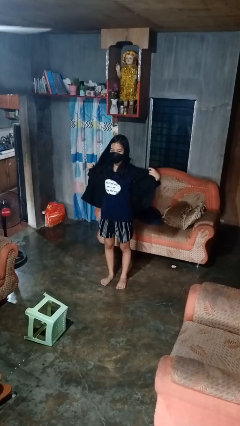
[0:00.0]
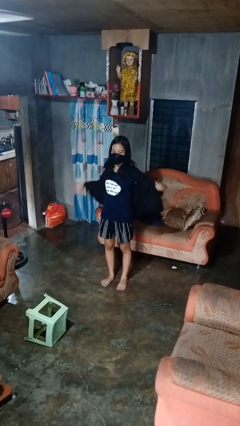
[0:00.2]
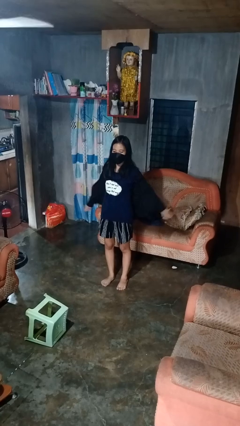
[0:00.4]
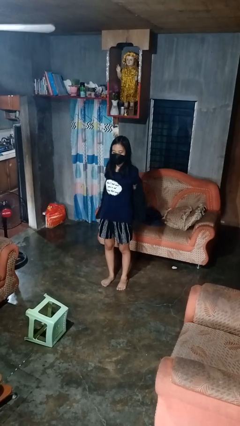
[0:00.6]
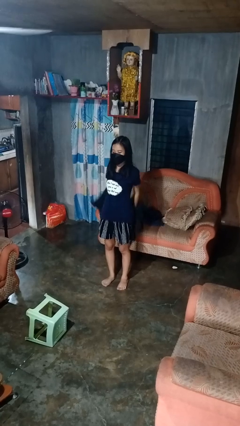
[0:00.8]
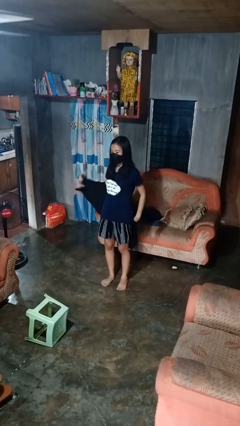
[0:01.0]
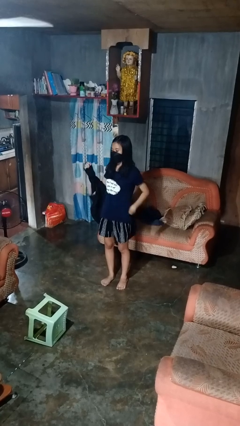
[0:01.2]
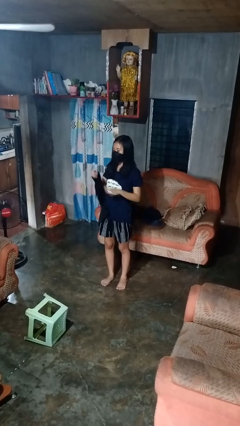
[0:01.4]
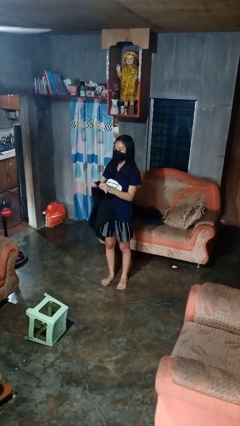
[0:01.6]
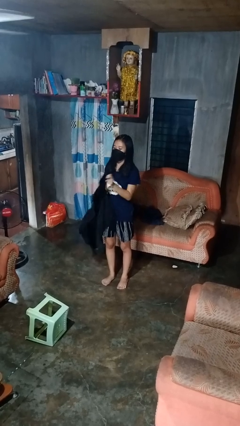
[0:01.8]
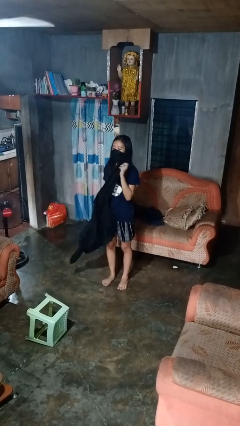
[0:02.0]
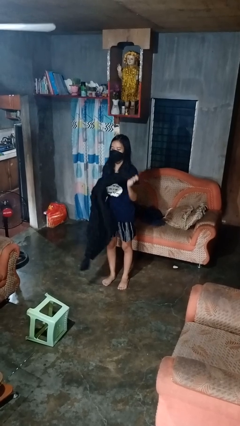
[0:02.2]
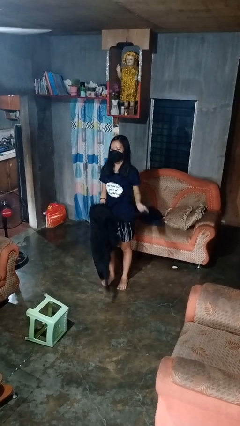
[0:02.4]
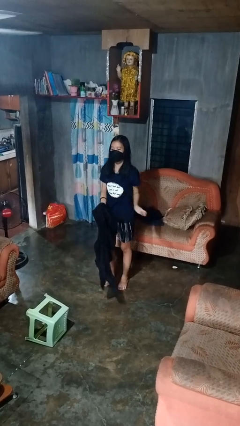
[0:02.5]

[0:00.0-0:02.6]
person takes off shirt

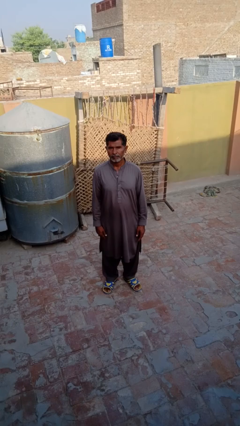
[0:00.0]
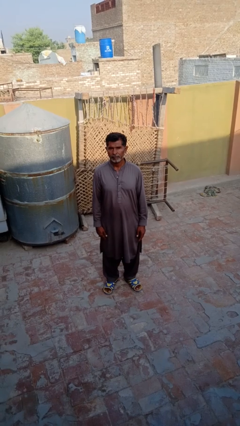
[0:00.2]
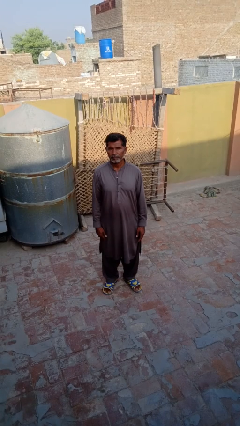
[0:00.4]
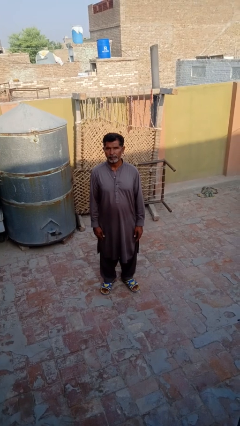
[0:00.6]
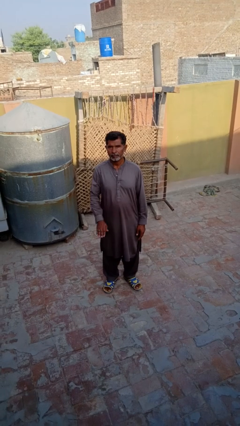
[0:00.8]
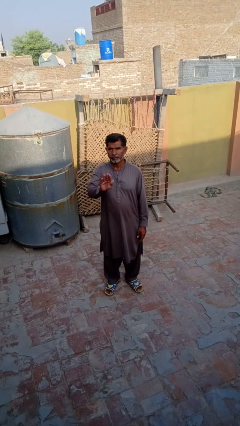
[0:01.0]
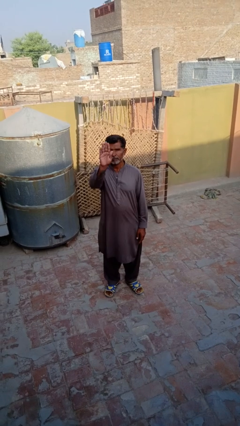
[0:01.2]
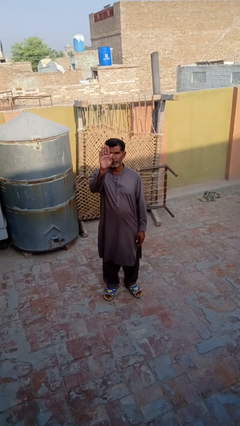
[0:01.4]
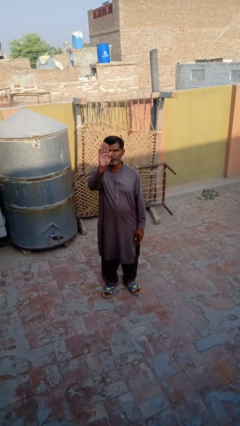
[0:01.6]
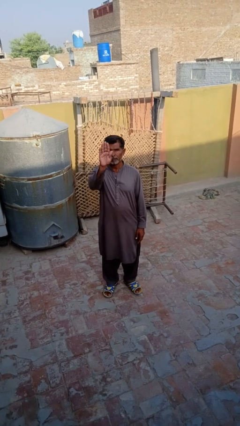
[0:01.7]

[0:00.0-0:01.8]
person gestures raise hand

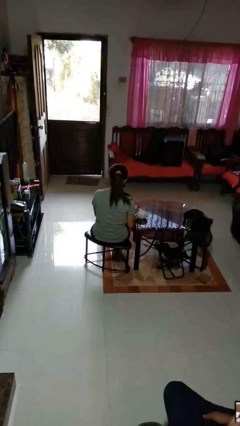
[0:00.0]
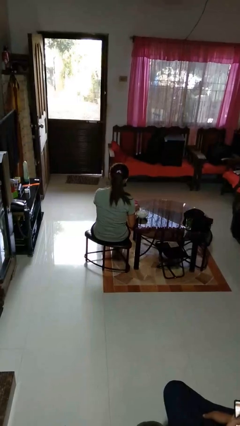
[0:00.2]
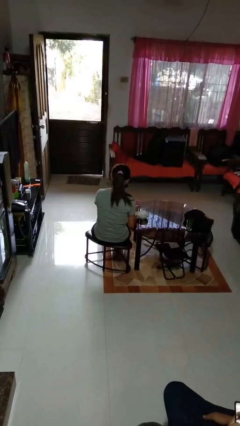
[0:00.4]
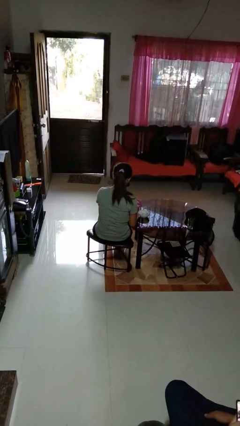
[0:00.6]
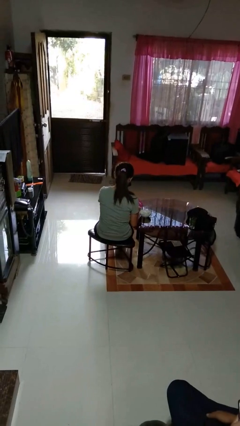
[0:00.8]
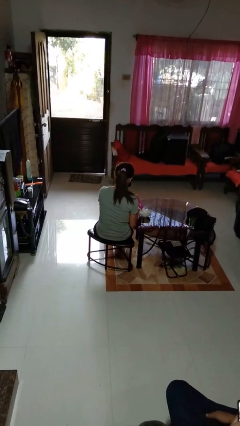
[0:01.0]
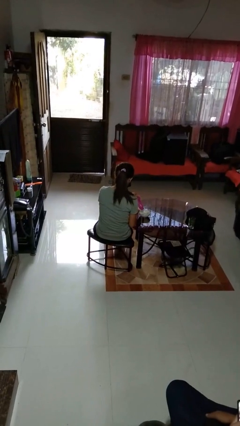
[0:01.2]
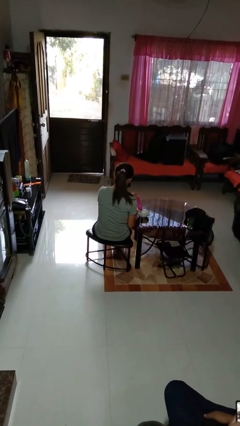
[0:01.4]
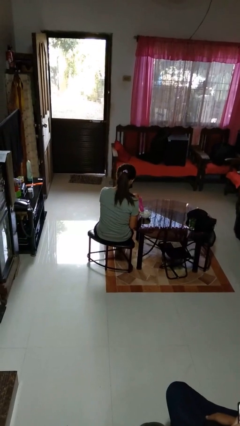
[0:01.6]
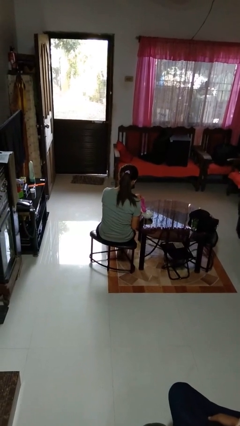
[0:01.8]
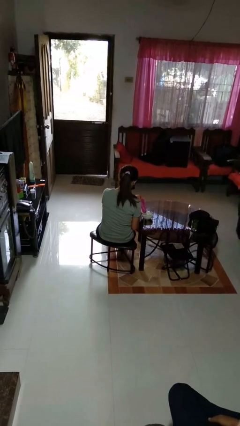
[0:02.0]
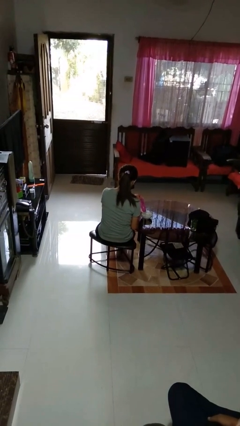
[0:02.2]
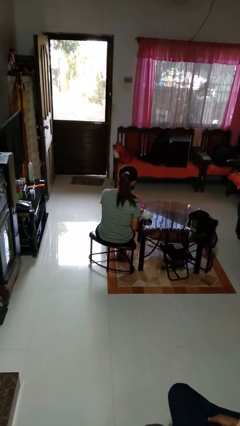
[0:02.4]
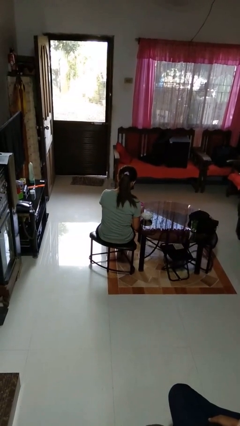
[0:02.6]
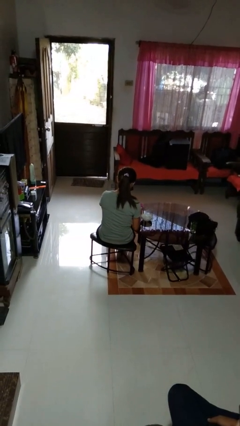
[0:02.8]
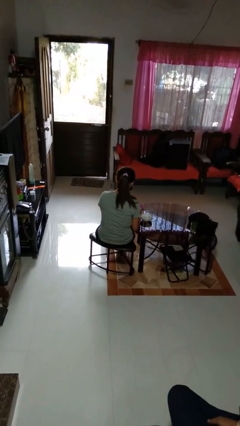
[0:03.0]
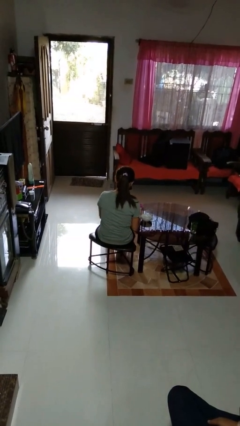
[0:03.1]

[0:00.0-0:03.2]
person pours into bowl

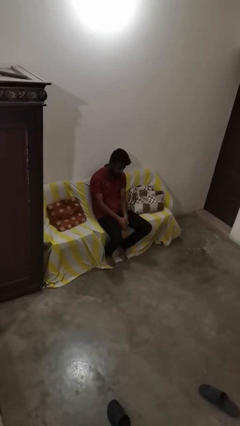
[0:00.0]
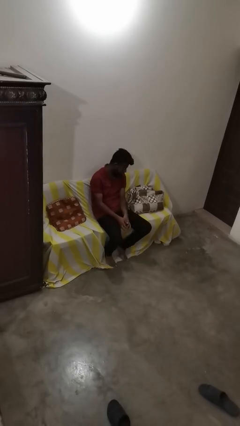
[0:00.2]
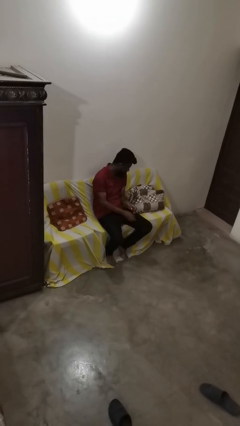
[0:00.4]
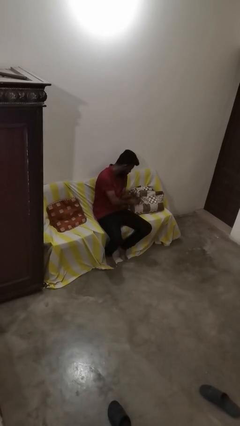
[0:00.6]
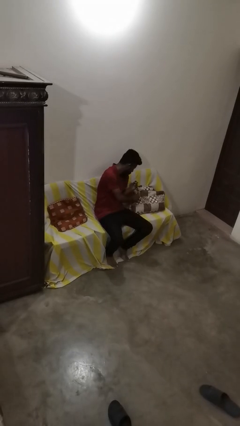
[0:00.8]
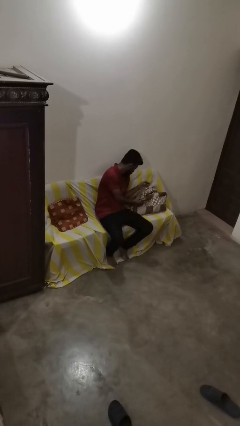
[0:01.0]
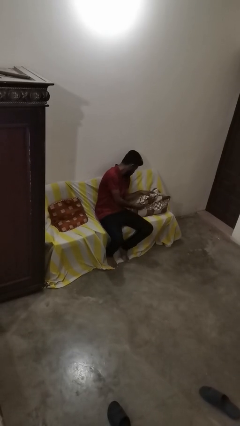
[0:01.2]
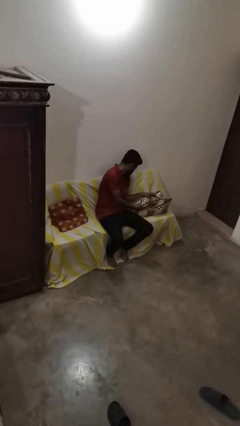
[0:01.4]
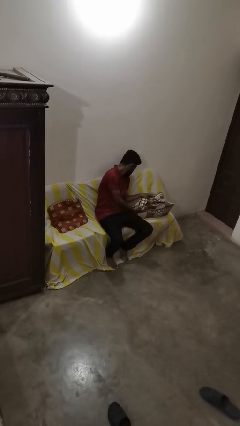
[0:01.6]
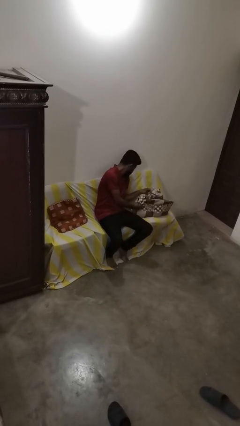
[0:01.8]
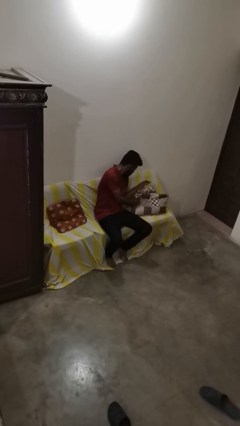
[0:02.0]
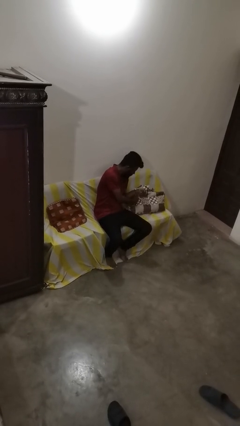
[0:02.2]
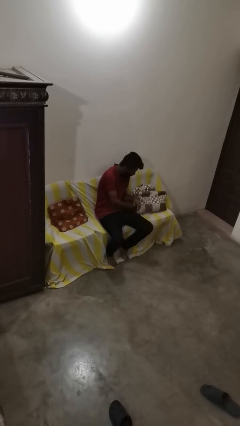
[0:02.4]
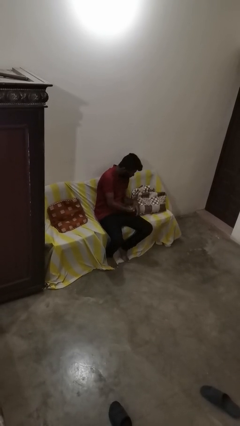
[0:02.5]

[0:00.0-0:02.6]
person searches in couch

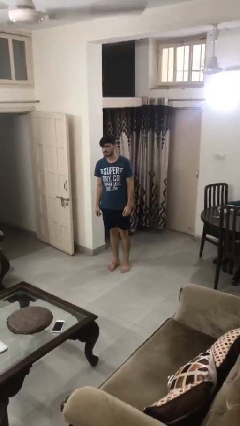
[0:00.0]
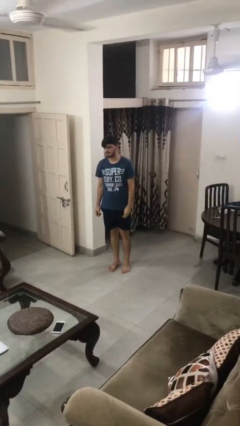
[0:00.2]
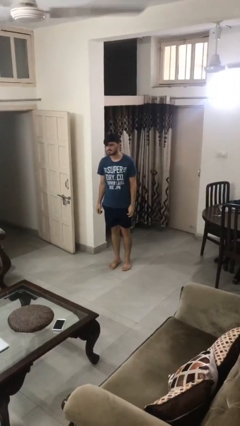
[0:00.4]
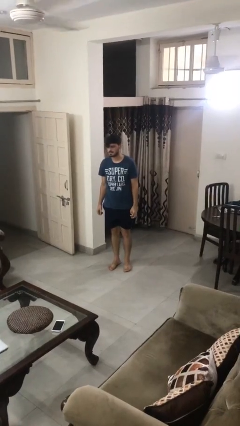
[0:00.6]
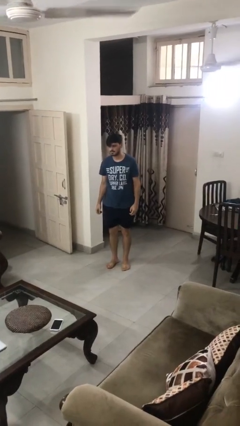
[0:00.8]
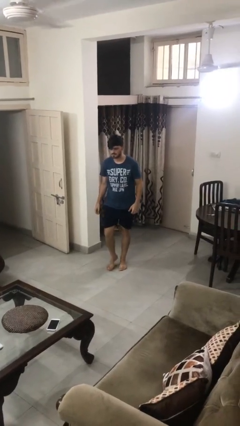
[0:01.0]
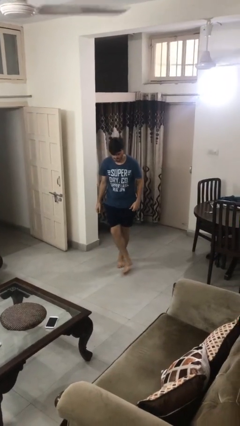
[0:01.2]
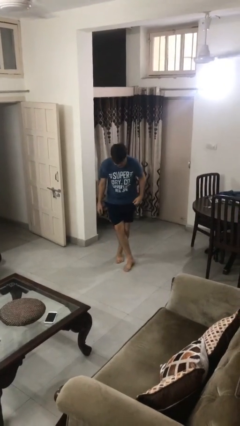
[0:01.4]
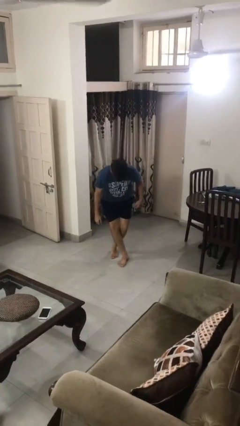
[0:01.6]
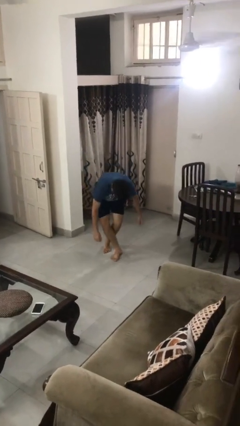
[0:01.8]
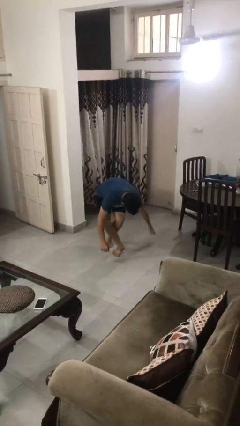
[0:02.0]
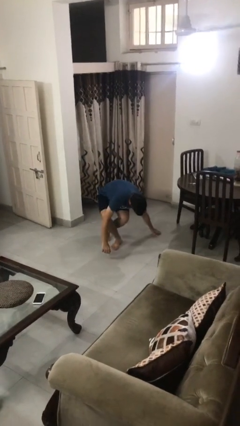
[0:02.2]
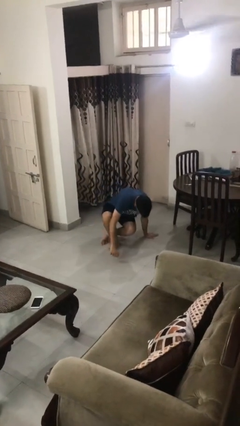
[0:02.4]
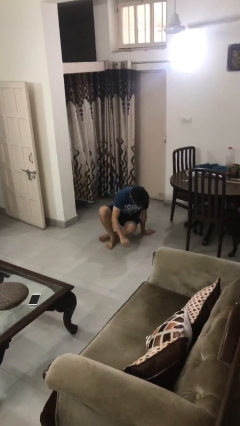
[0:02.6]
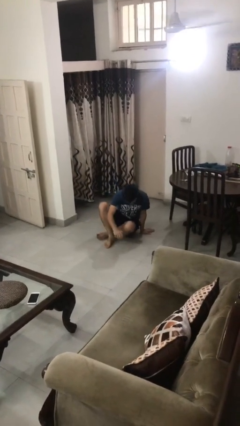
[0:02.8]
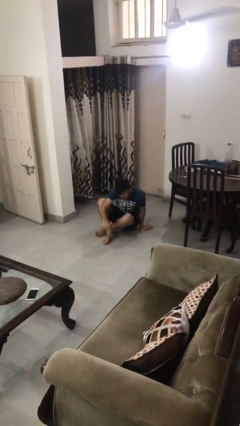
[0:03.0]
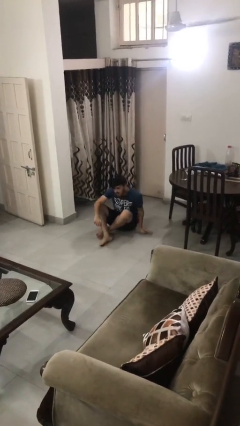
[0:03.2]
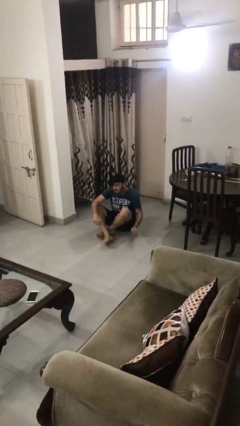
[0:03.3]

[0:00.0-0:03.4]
person sits crisscross

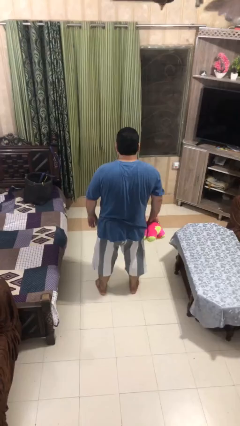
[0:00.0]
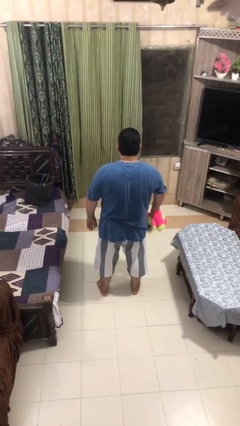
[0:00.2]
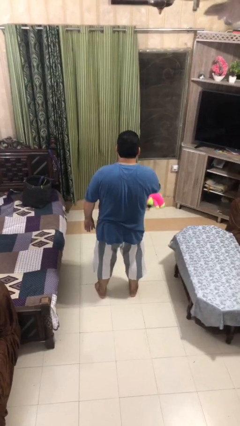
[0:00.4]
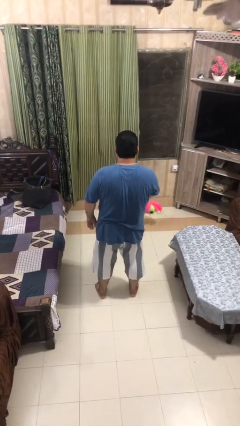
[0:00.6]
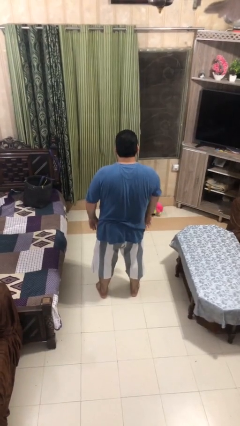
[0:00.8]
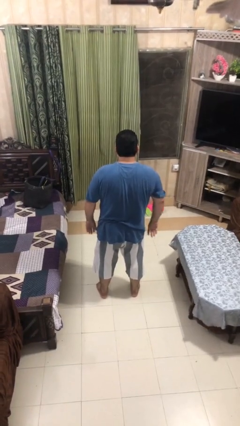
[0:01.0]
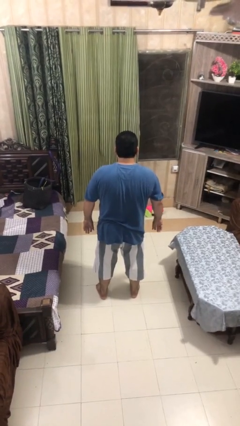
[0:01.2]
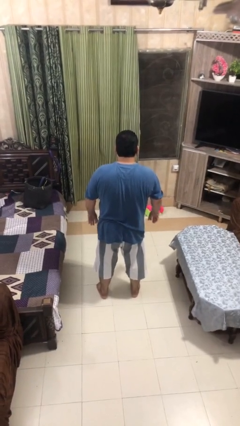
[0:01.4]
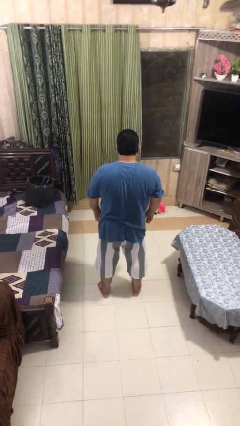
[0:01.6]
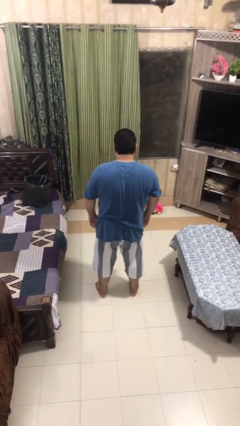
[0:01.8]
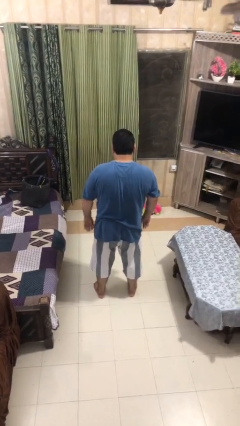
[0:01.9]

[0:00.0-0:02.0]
person throws object to ground

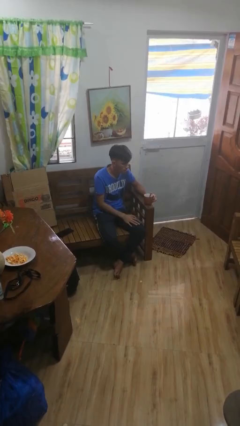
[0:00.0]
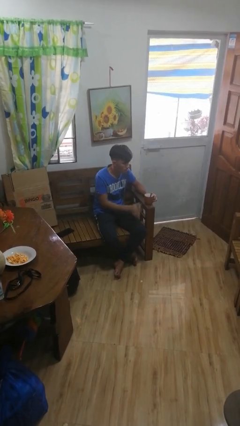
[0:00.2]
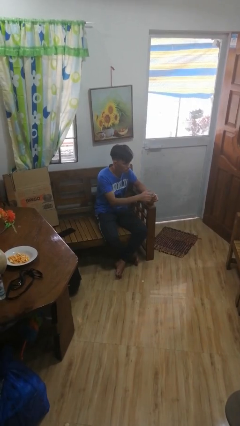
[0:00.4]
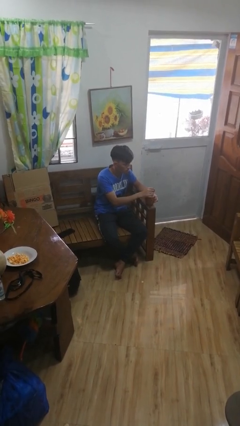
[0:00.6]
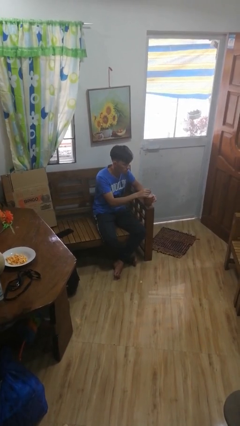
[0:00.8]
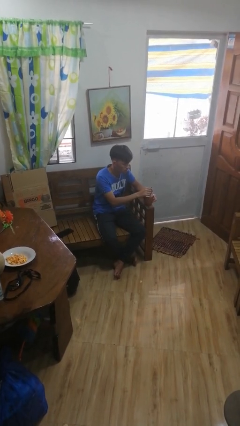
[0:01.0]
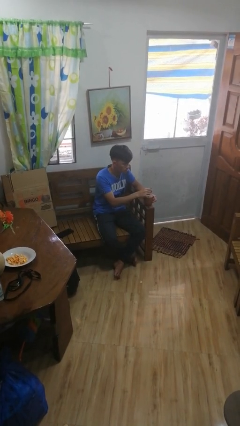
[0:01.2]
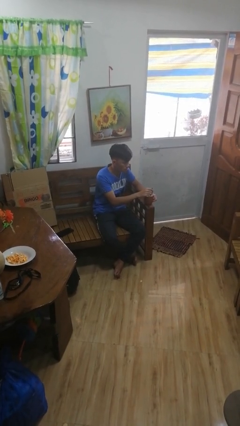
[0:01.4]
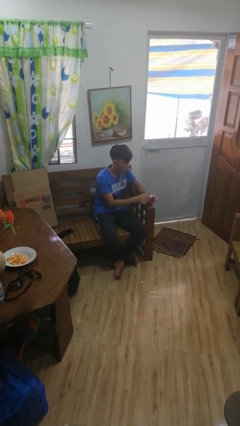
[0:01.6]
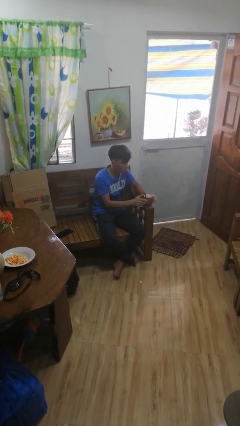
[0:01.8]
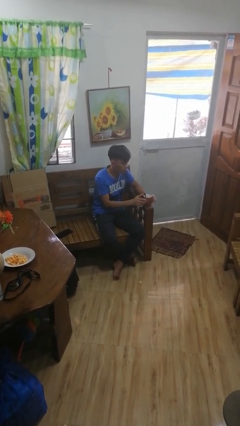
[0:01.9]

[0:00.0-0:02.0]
person stirs mug
